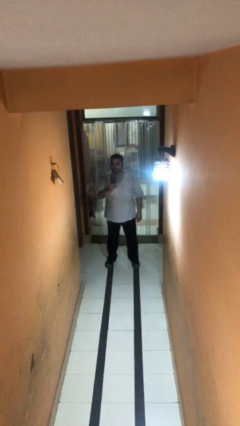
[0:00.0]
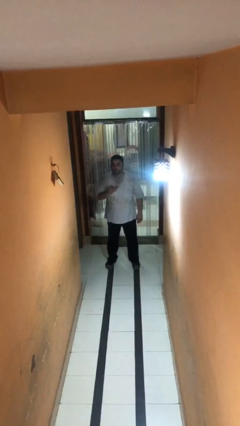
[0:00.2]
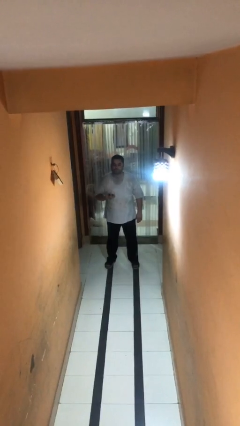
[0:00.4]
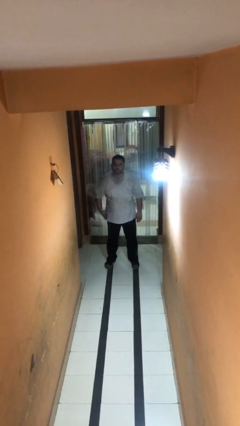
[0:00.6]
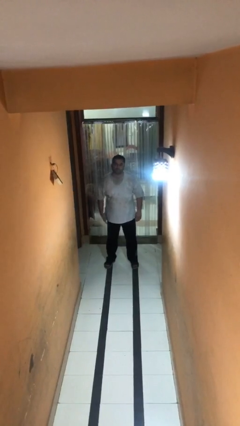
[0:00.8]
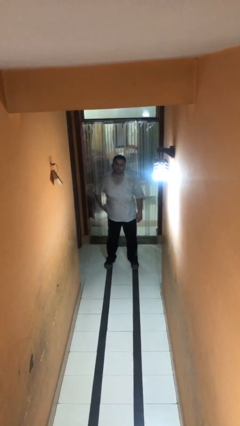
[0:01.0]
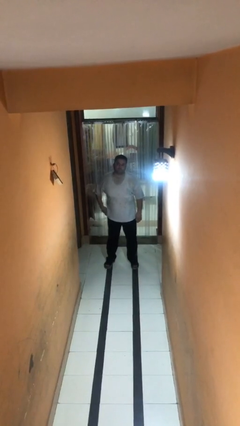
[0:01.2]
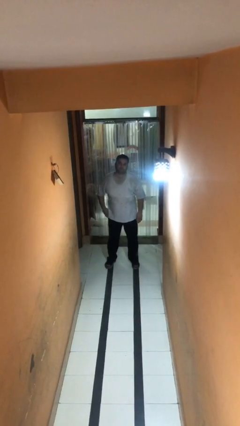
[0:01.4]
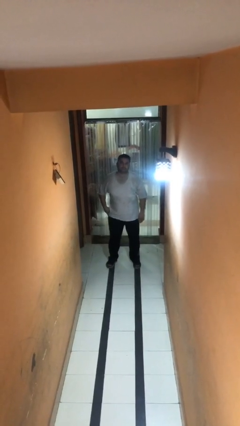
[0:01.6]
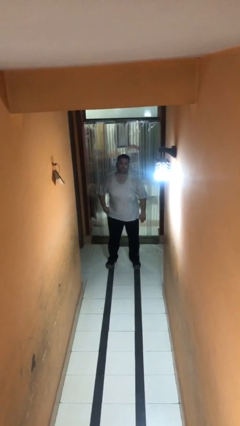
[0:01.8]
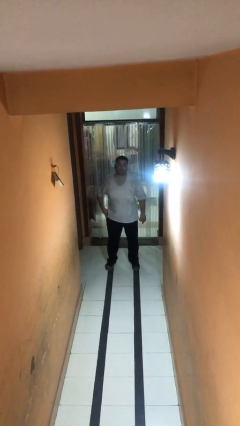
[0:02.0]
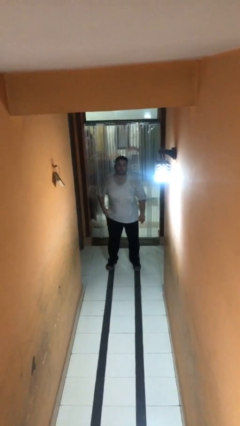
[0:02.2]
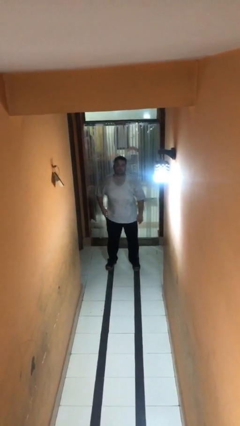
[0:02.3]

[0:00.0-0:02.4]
person puts phone into pocket

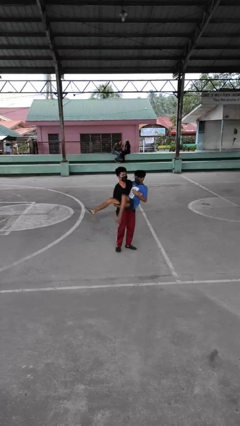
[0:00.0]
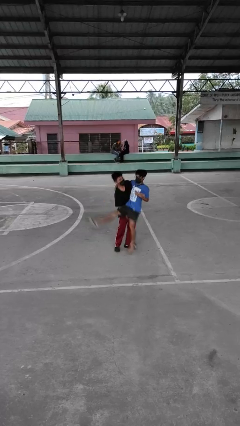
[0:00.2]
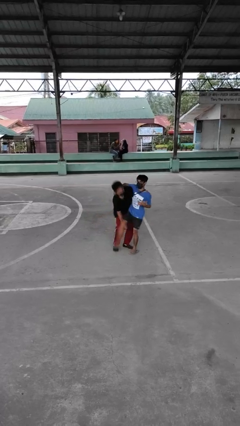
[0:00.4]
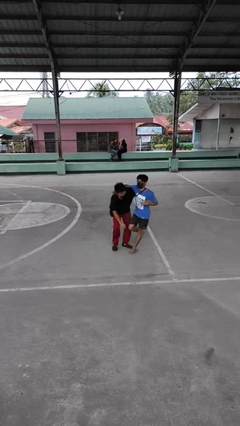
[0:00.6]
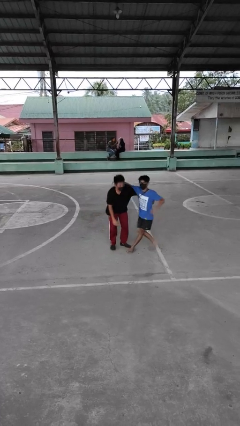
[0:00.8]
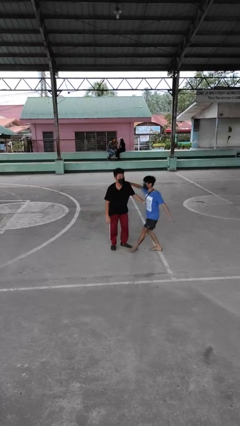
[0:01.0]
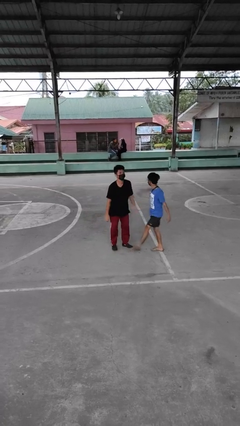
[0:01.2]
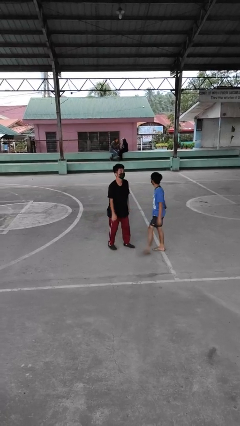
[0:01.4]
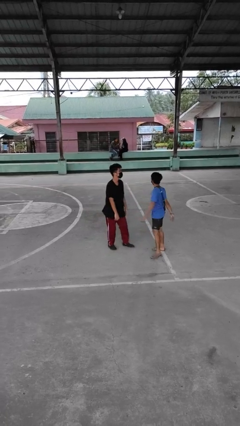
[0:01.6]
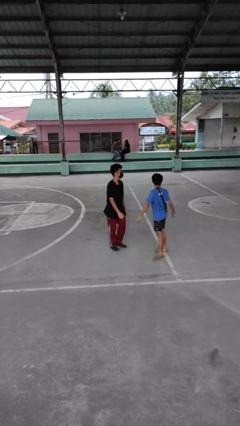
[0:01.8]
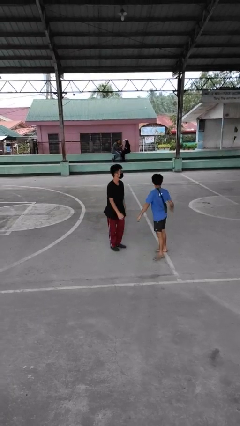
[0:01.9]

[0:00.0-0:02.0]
person puts down person

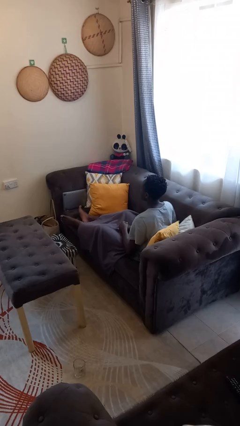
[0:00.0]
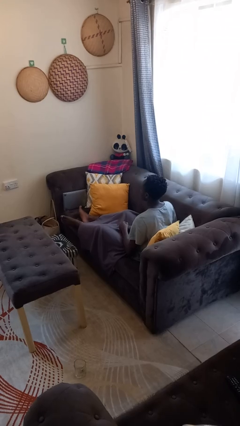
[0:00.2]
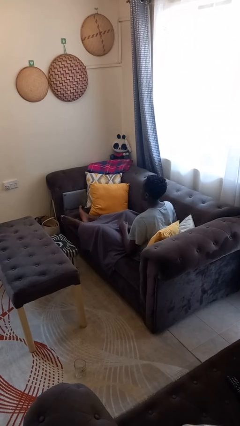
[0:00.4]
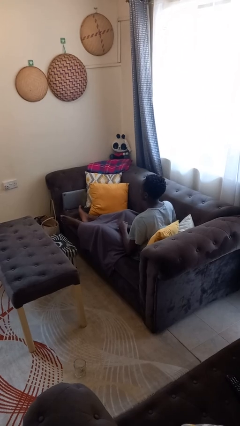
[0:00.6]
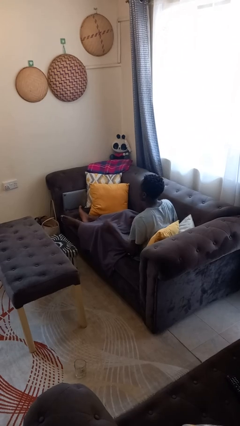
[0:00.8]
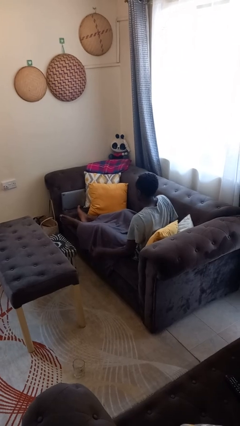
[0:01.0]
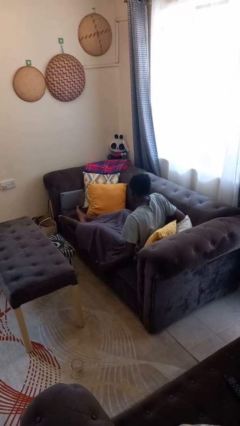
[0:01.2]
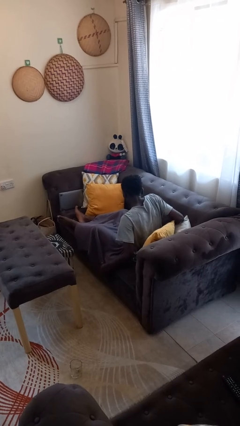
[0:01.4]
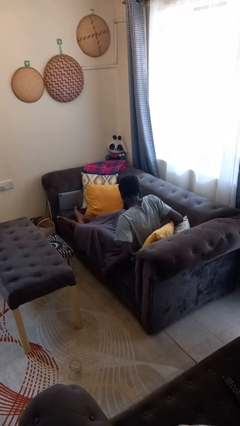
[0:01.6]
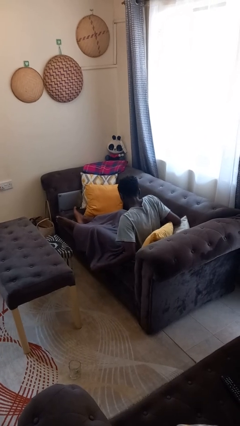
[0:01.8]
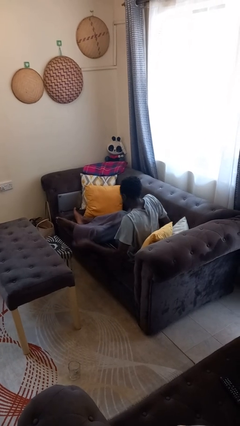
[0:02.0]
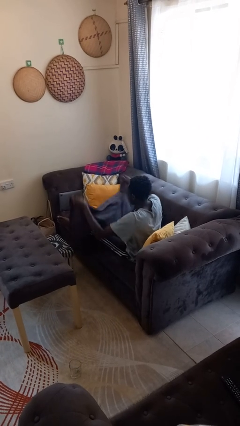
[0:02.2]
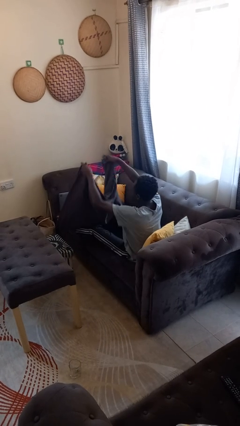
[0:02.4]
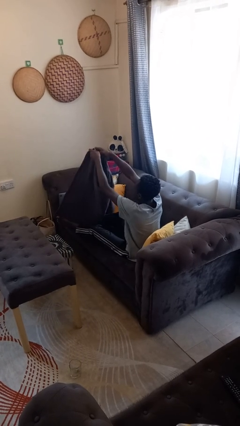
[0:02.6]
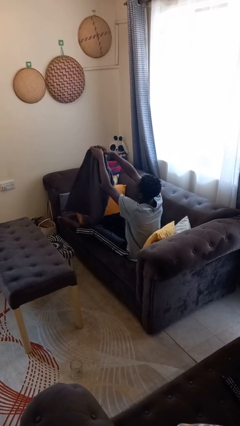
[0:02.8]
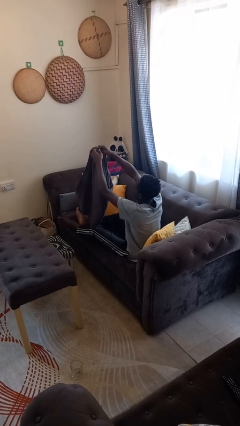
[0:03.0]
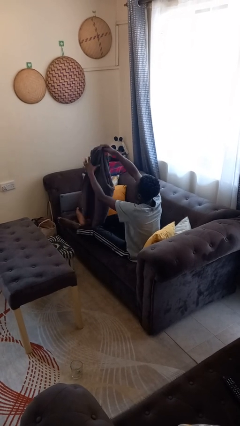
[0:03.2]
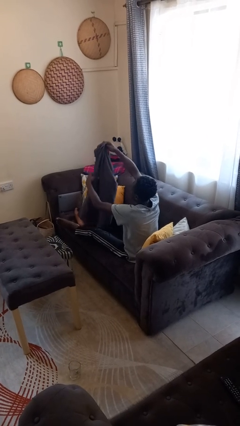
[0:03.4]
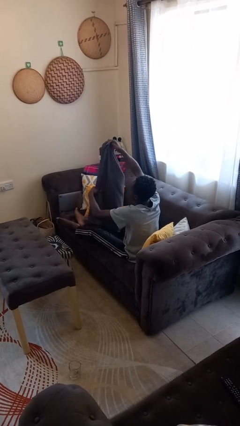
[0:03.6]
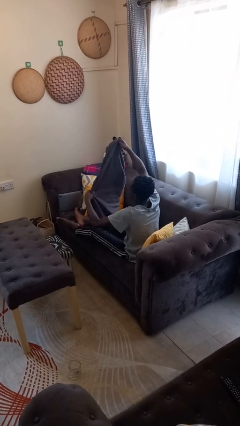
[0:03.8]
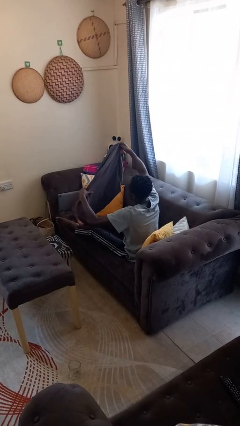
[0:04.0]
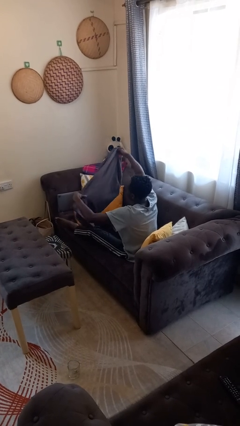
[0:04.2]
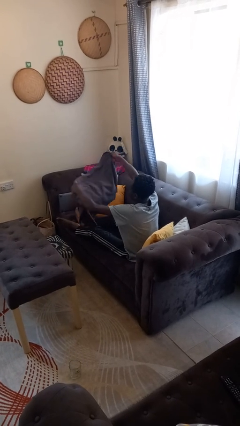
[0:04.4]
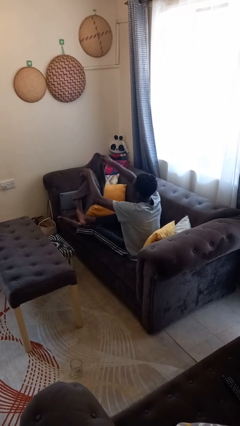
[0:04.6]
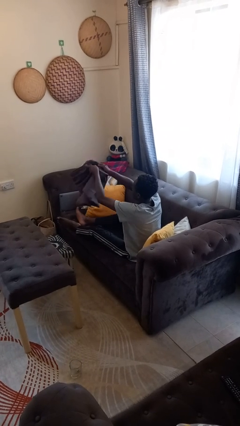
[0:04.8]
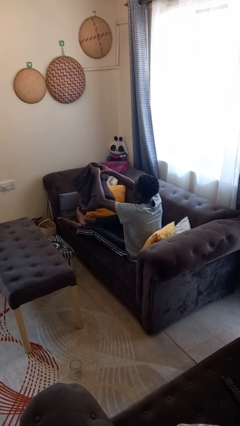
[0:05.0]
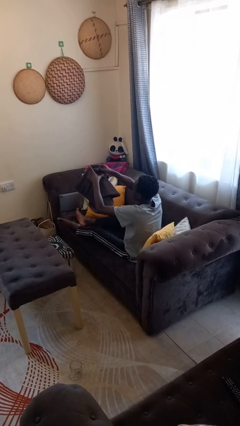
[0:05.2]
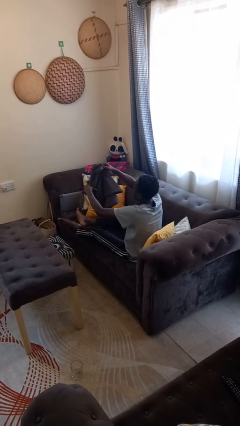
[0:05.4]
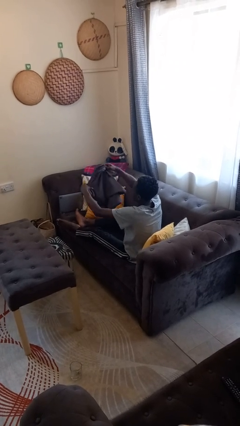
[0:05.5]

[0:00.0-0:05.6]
person folds blanket

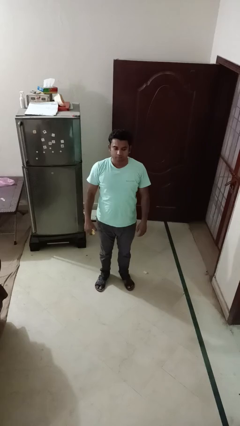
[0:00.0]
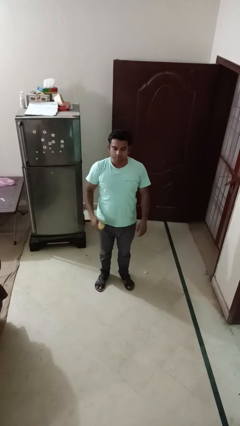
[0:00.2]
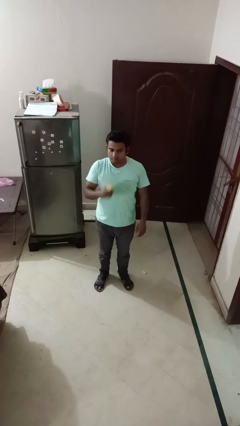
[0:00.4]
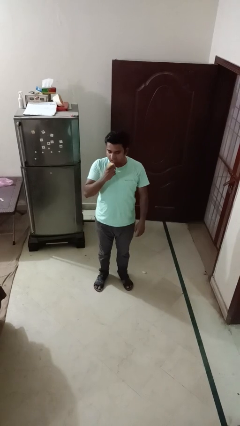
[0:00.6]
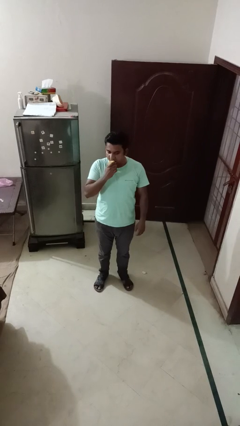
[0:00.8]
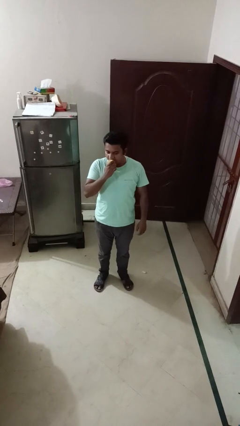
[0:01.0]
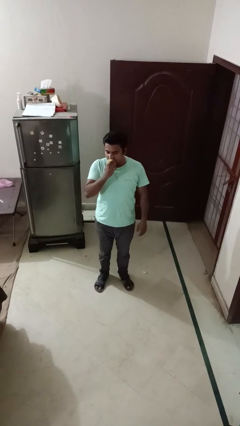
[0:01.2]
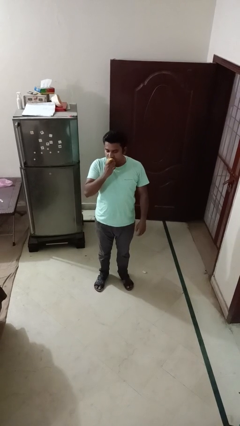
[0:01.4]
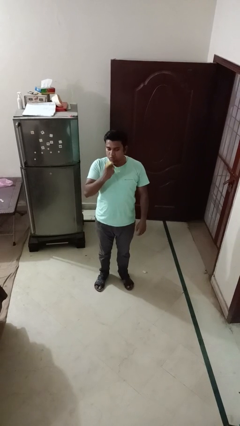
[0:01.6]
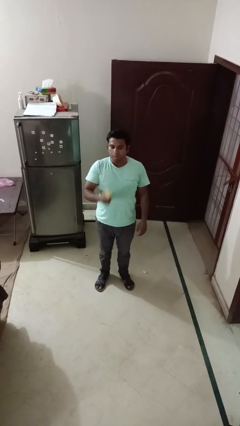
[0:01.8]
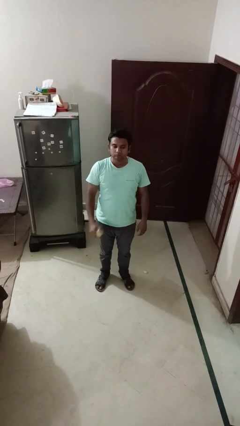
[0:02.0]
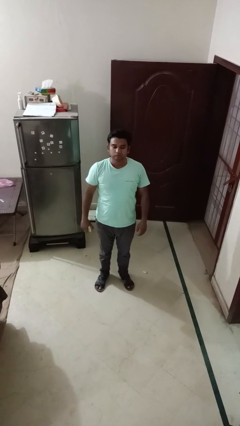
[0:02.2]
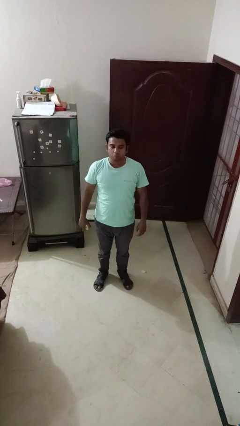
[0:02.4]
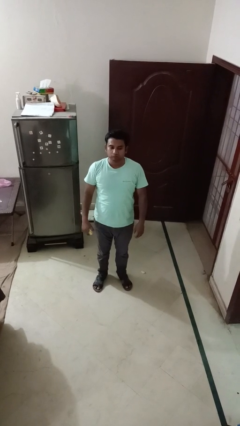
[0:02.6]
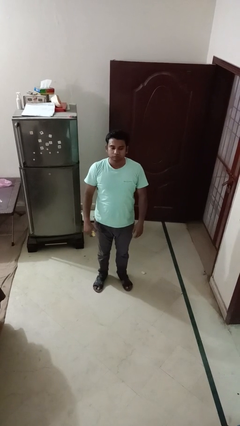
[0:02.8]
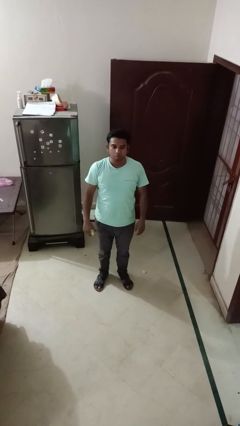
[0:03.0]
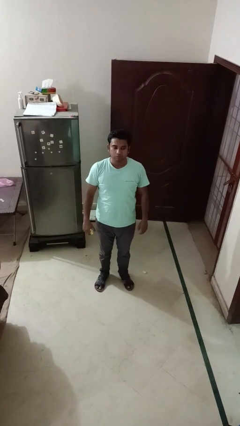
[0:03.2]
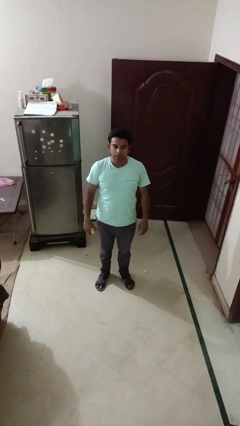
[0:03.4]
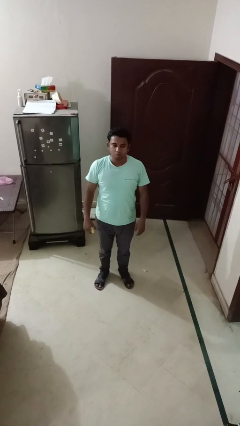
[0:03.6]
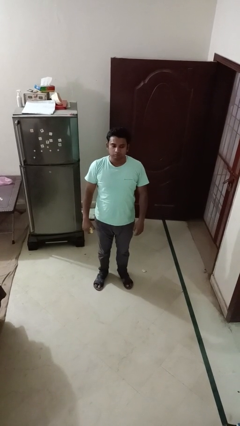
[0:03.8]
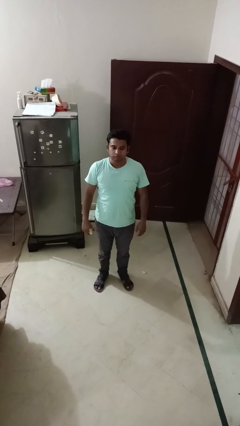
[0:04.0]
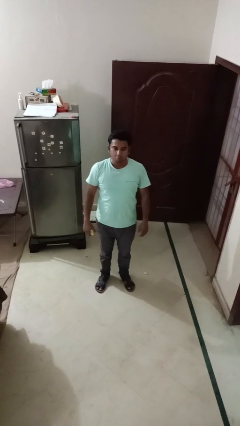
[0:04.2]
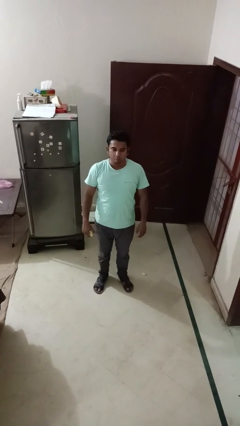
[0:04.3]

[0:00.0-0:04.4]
person eats apple

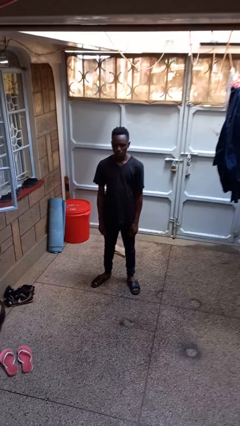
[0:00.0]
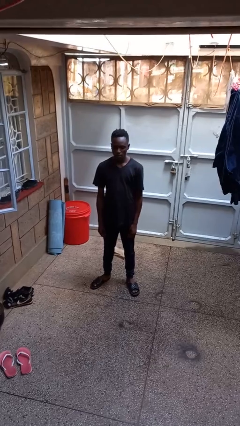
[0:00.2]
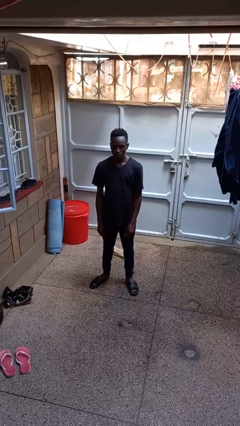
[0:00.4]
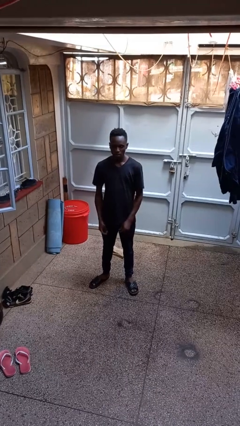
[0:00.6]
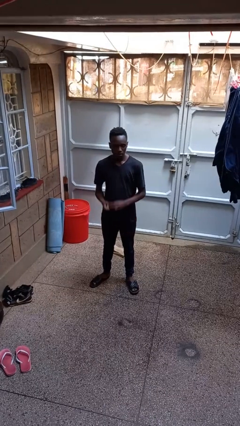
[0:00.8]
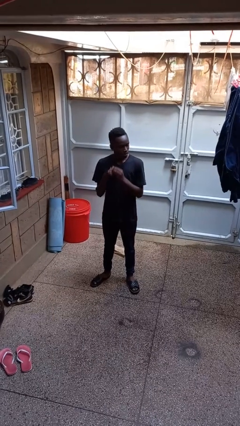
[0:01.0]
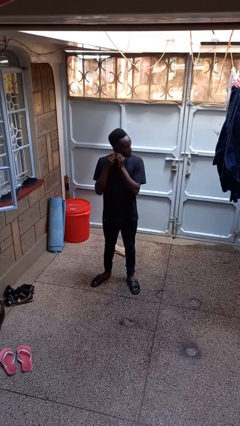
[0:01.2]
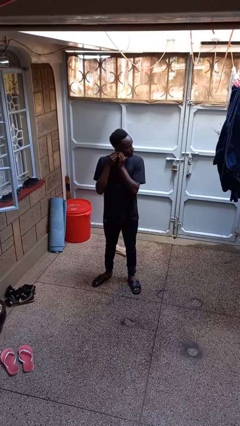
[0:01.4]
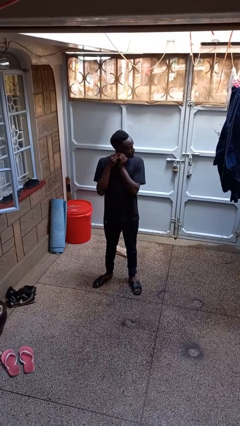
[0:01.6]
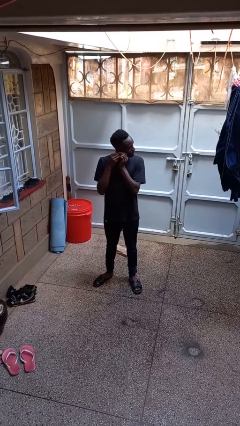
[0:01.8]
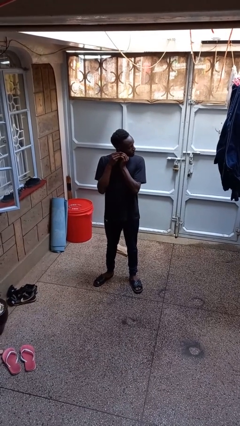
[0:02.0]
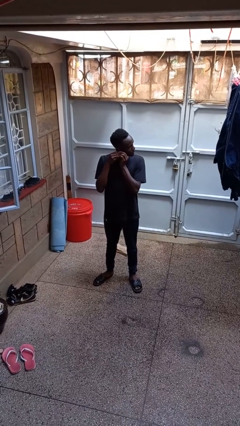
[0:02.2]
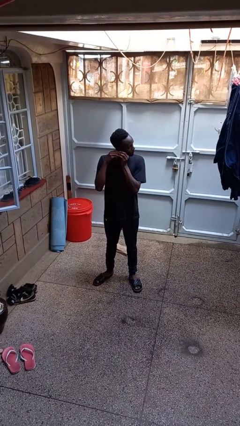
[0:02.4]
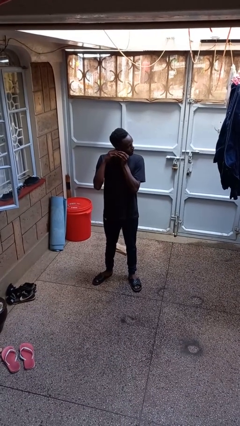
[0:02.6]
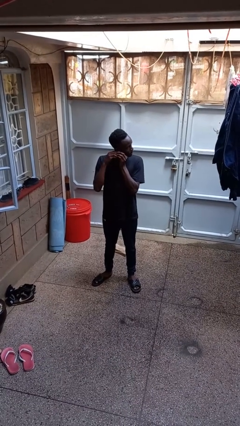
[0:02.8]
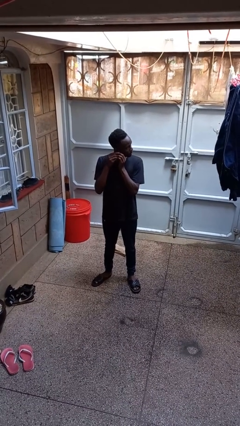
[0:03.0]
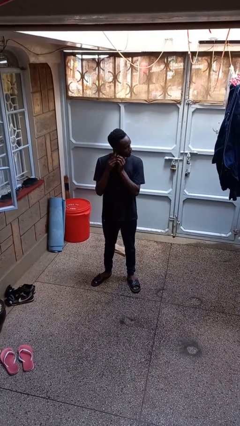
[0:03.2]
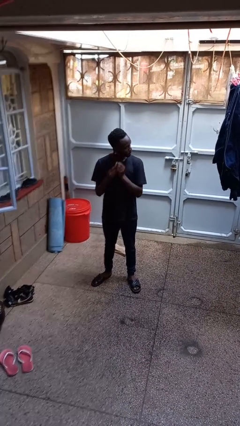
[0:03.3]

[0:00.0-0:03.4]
person puts on earrings
